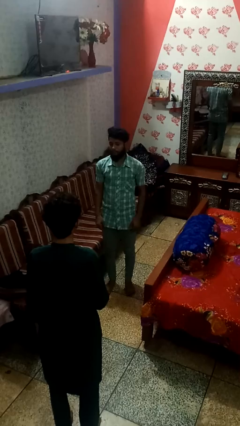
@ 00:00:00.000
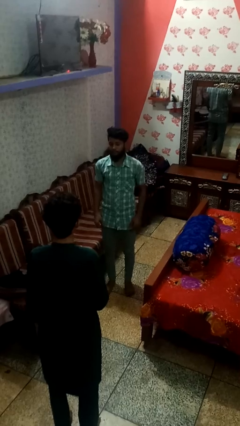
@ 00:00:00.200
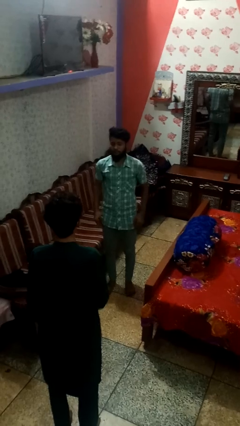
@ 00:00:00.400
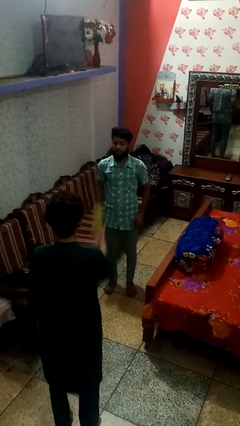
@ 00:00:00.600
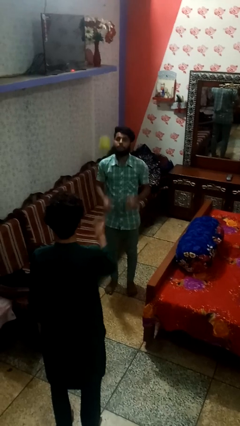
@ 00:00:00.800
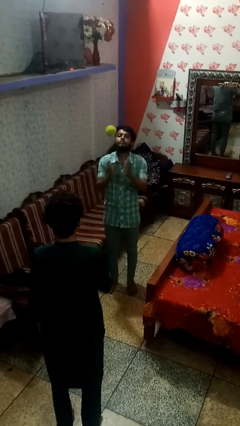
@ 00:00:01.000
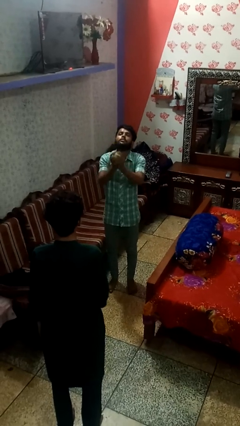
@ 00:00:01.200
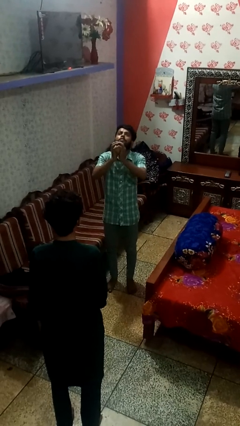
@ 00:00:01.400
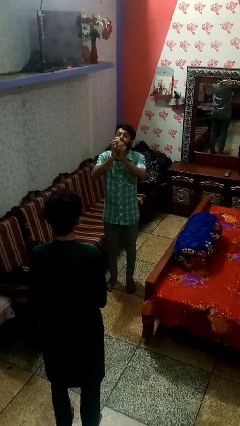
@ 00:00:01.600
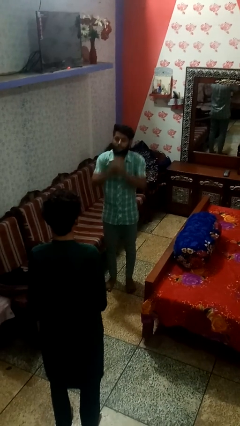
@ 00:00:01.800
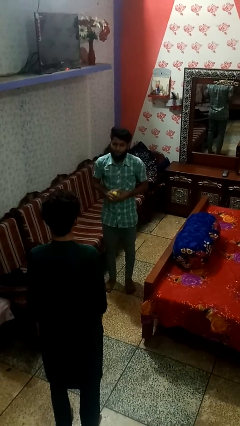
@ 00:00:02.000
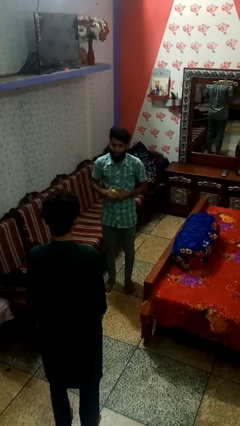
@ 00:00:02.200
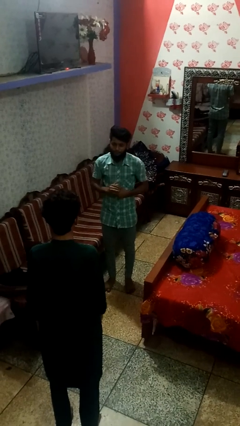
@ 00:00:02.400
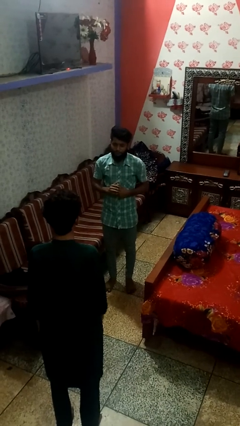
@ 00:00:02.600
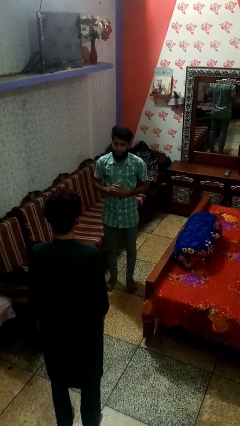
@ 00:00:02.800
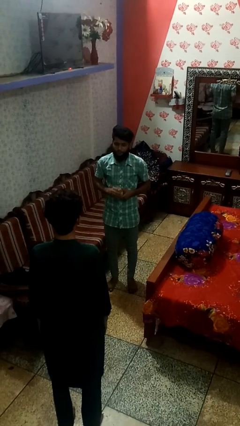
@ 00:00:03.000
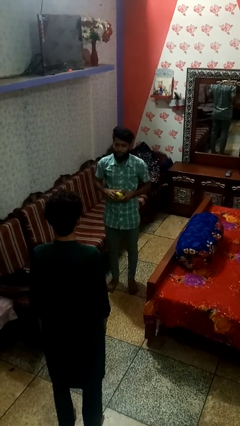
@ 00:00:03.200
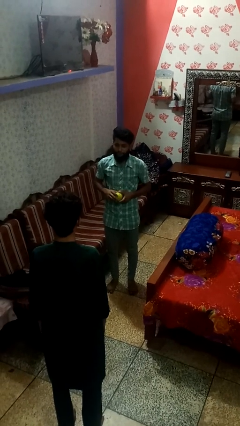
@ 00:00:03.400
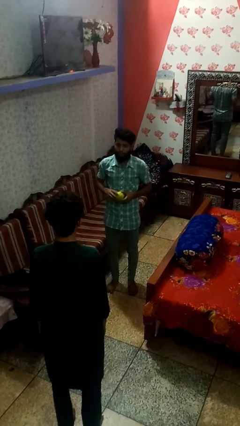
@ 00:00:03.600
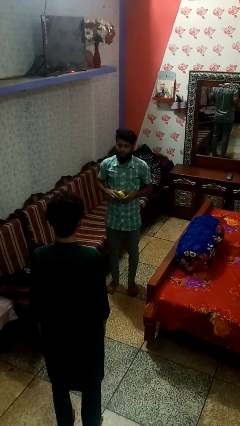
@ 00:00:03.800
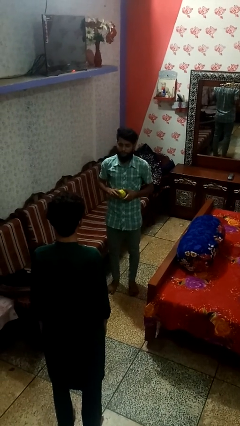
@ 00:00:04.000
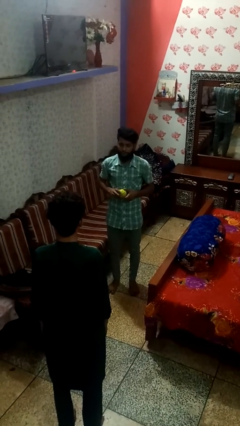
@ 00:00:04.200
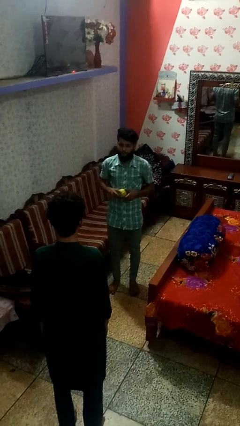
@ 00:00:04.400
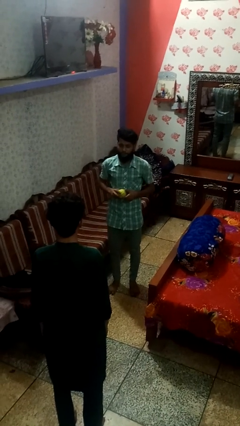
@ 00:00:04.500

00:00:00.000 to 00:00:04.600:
person catches object from person

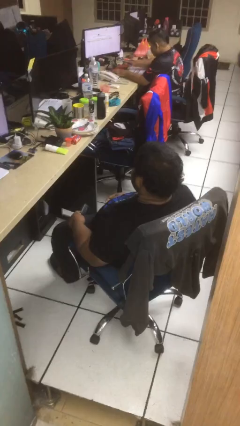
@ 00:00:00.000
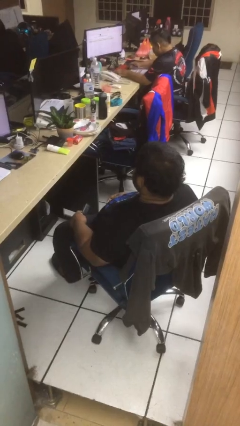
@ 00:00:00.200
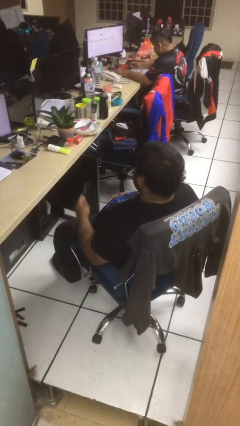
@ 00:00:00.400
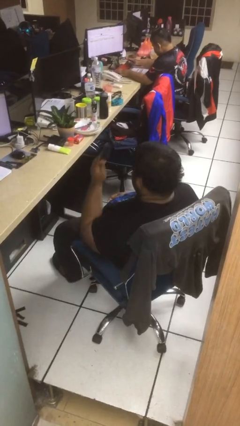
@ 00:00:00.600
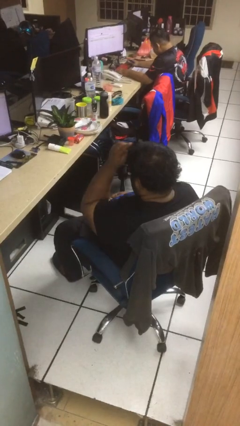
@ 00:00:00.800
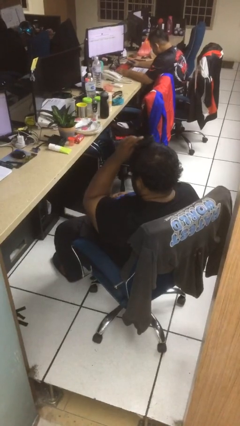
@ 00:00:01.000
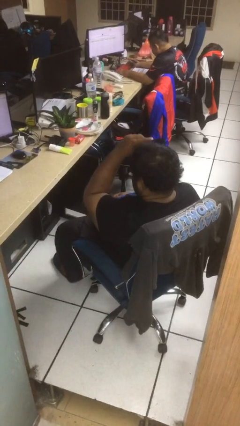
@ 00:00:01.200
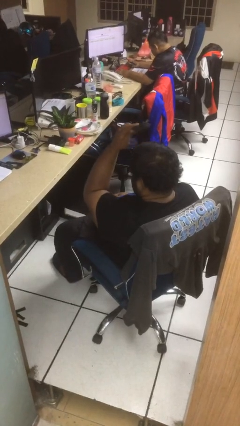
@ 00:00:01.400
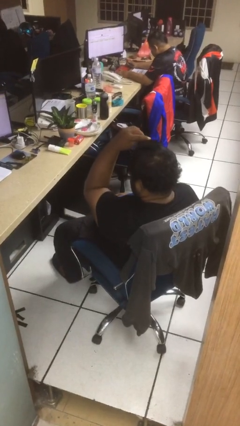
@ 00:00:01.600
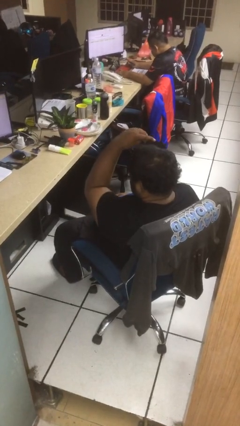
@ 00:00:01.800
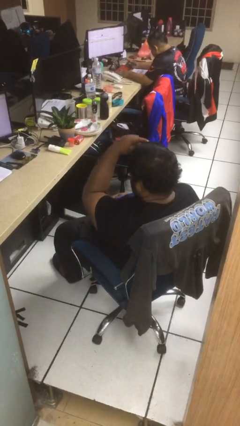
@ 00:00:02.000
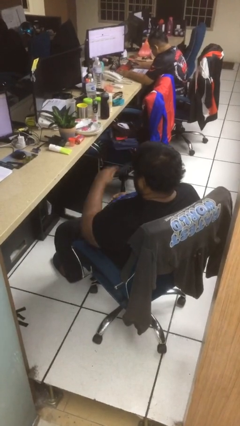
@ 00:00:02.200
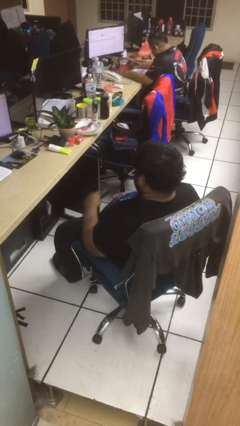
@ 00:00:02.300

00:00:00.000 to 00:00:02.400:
person brushes hair

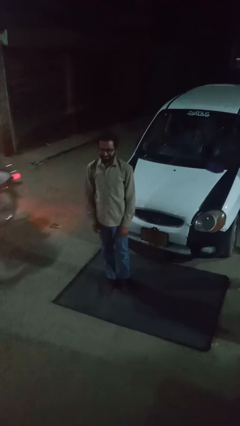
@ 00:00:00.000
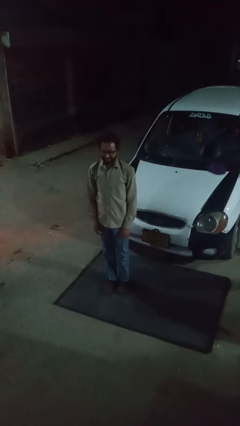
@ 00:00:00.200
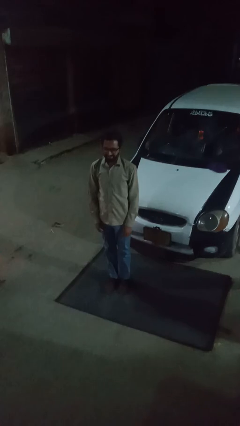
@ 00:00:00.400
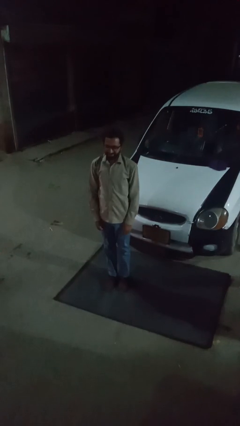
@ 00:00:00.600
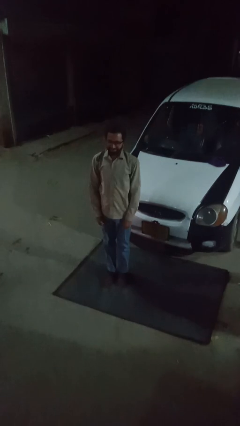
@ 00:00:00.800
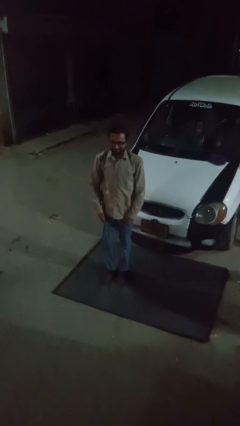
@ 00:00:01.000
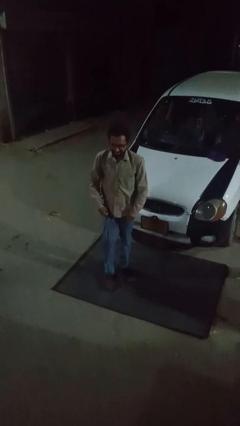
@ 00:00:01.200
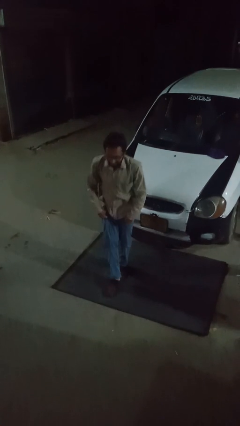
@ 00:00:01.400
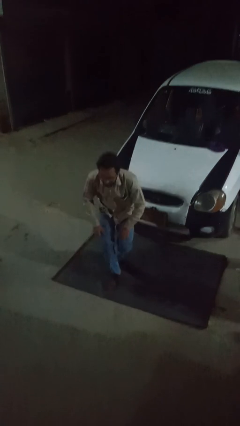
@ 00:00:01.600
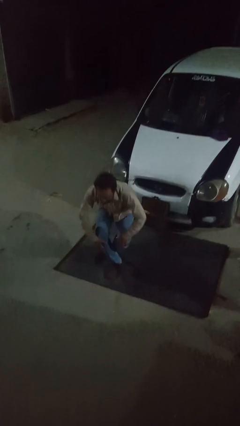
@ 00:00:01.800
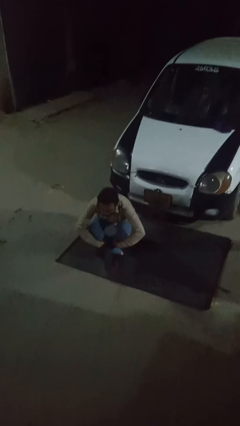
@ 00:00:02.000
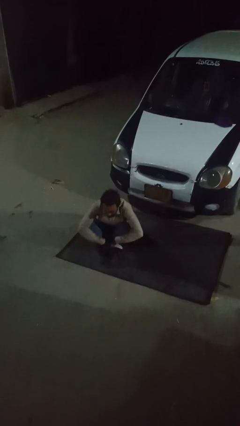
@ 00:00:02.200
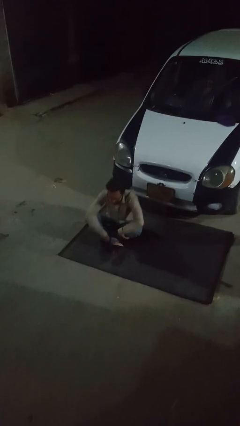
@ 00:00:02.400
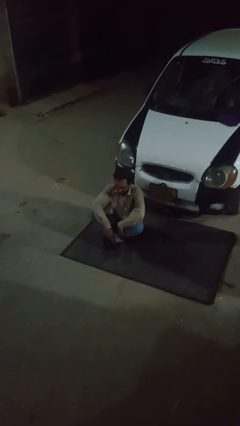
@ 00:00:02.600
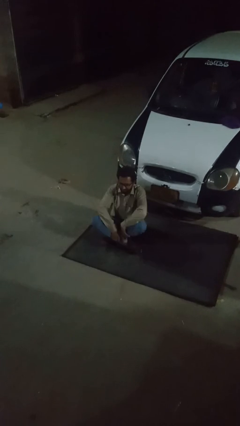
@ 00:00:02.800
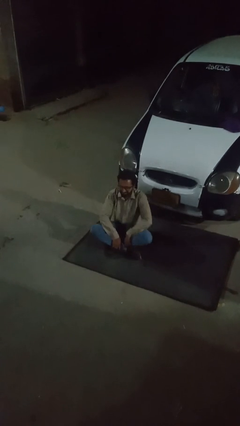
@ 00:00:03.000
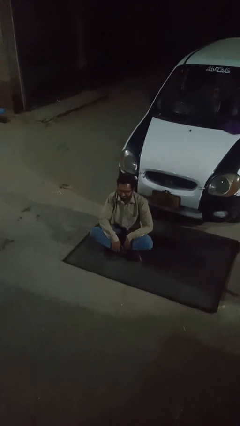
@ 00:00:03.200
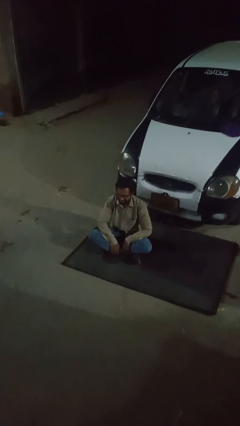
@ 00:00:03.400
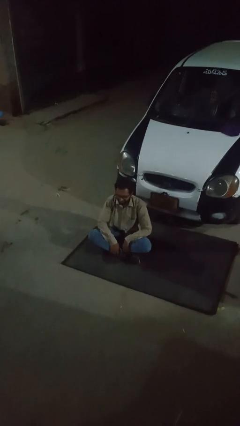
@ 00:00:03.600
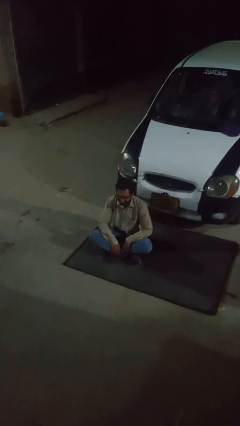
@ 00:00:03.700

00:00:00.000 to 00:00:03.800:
person sits crisscross

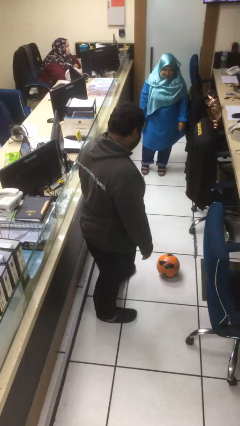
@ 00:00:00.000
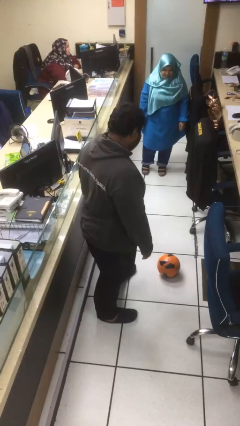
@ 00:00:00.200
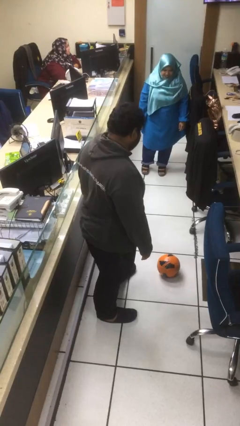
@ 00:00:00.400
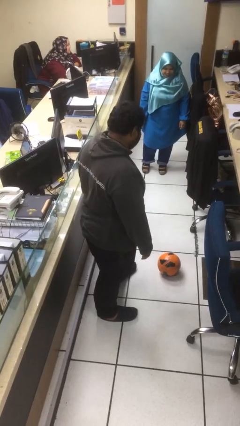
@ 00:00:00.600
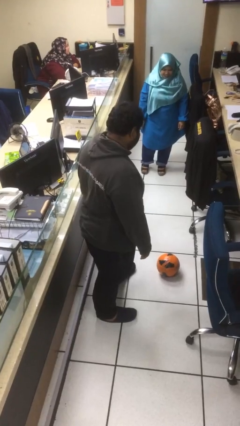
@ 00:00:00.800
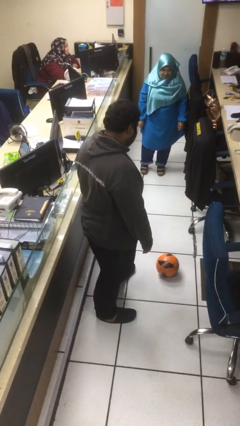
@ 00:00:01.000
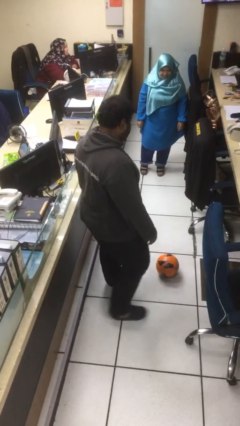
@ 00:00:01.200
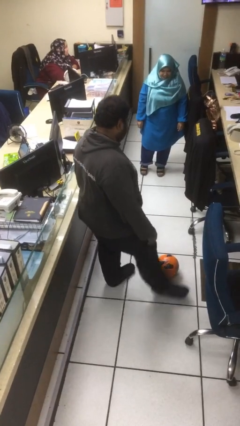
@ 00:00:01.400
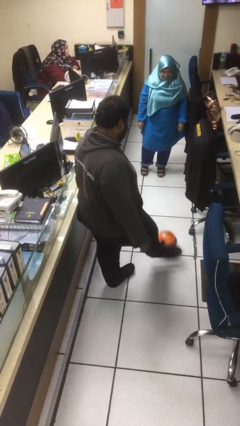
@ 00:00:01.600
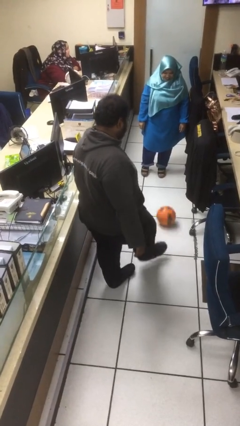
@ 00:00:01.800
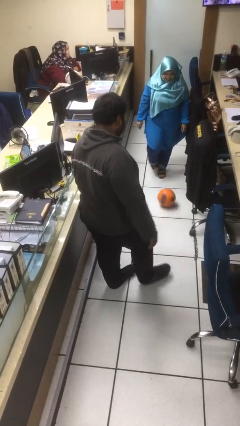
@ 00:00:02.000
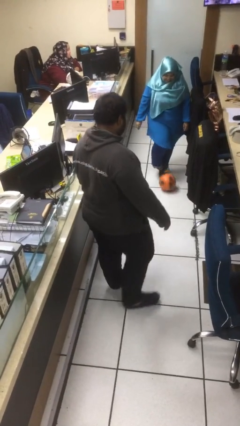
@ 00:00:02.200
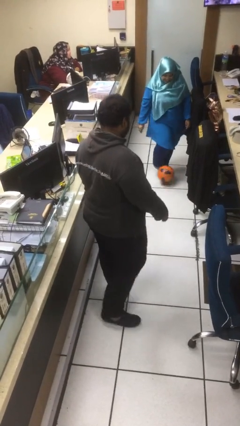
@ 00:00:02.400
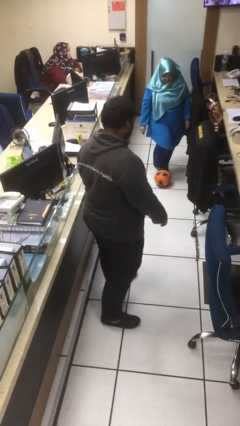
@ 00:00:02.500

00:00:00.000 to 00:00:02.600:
person kicks object to person

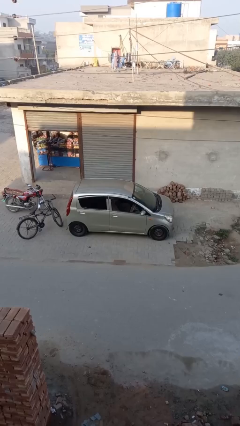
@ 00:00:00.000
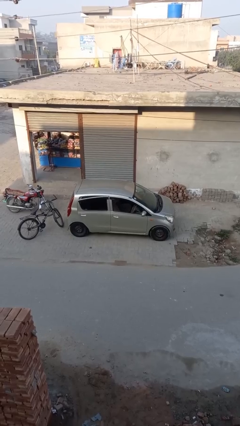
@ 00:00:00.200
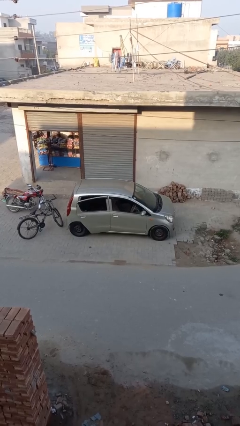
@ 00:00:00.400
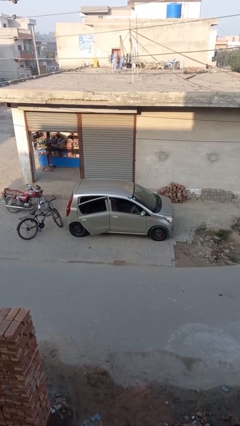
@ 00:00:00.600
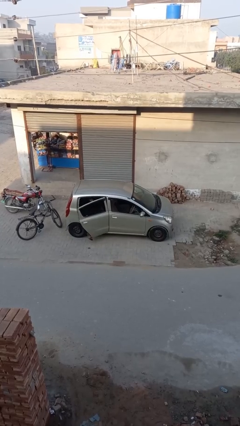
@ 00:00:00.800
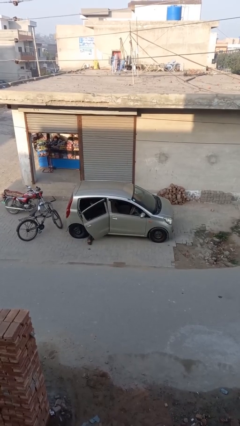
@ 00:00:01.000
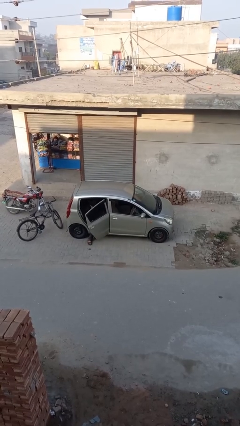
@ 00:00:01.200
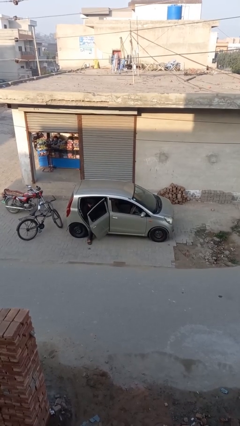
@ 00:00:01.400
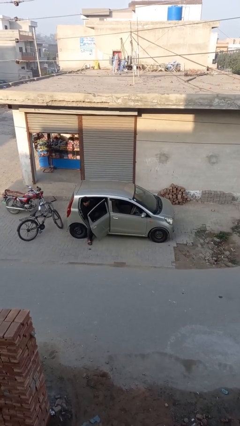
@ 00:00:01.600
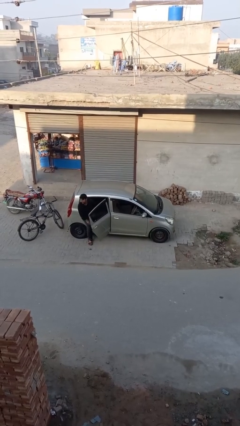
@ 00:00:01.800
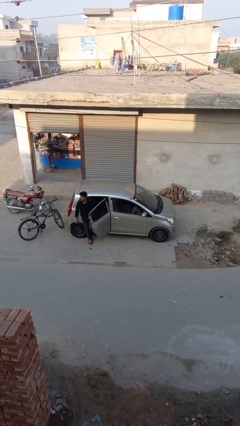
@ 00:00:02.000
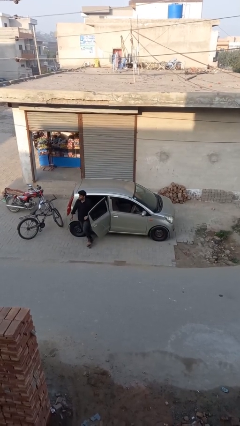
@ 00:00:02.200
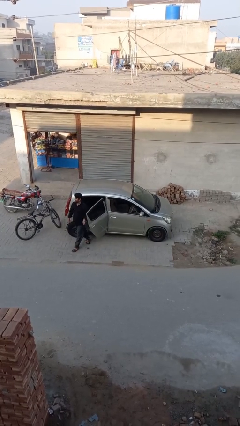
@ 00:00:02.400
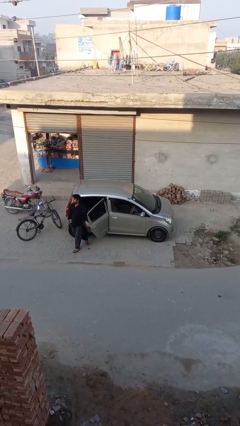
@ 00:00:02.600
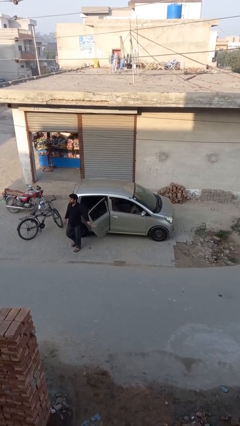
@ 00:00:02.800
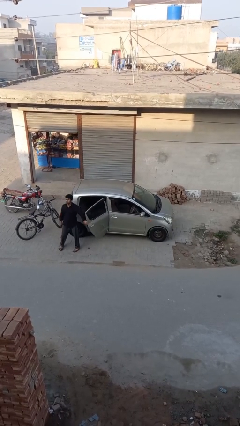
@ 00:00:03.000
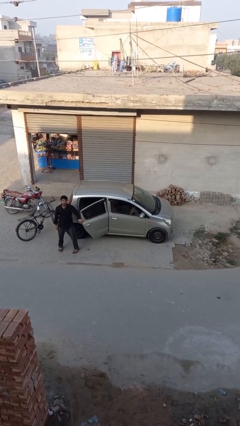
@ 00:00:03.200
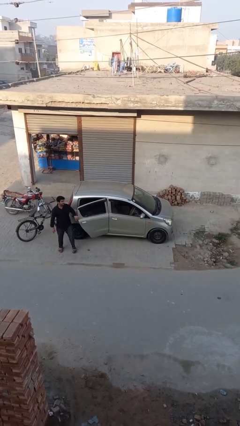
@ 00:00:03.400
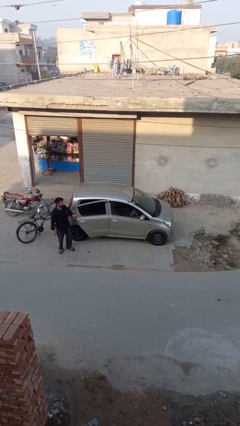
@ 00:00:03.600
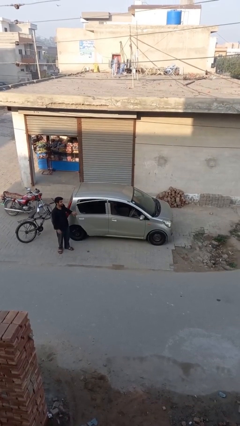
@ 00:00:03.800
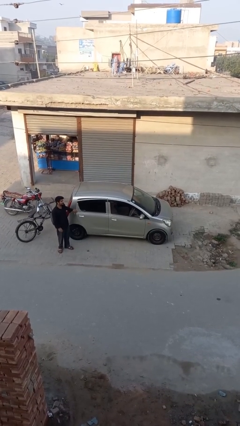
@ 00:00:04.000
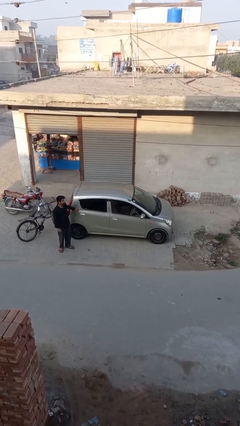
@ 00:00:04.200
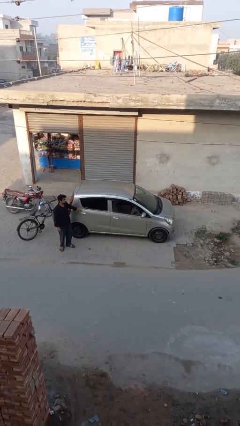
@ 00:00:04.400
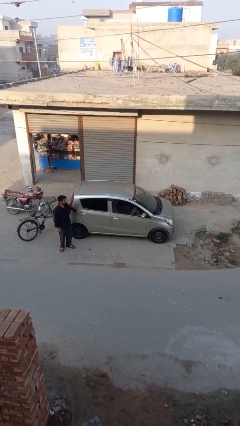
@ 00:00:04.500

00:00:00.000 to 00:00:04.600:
car drops off person
